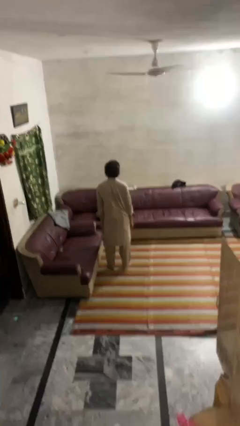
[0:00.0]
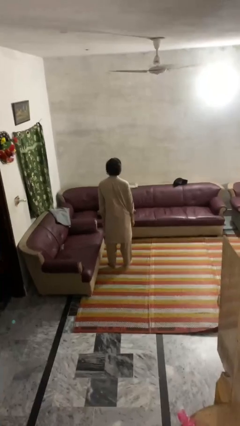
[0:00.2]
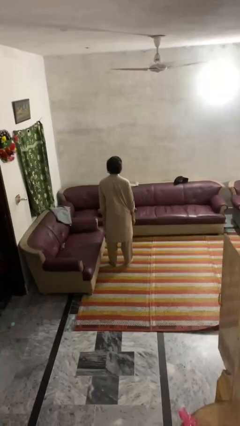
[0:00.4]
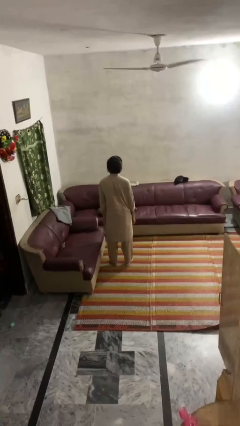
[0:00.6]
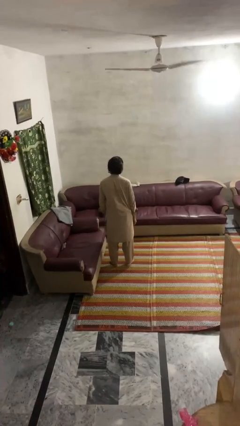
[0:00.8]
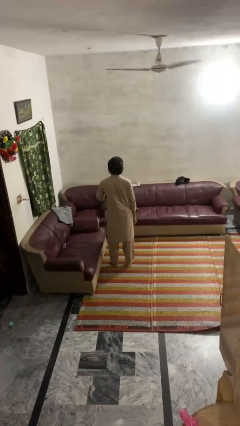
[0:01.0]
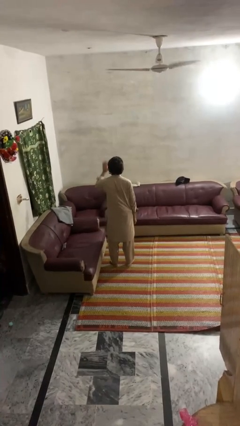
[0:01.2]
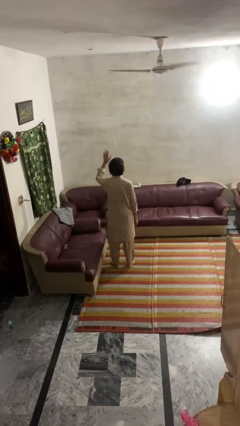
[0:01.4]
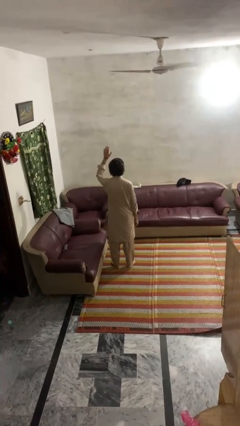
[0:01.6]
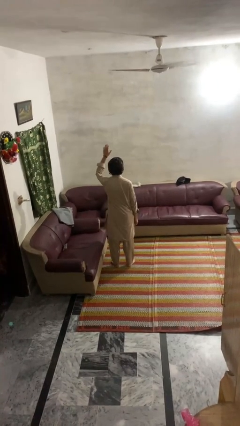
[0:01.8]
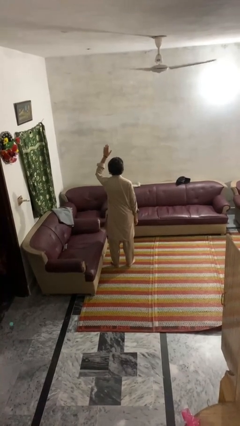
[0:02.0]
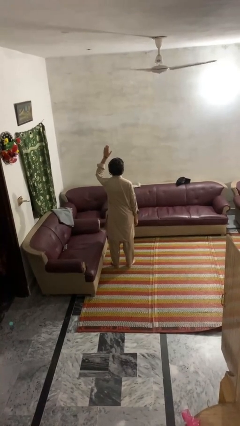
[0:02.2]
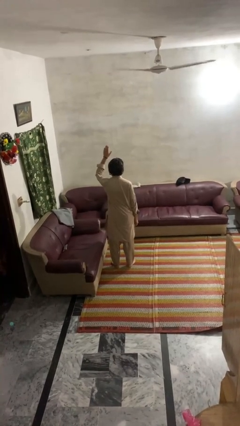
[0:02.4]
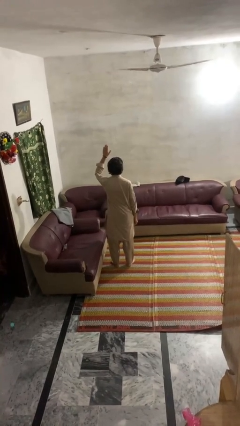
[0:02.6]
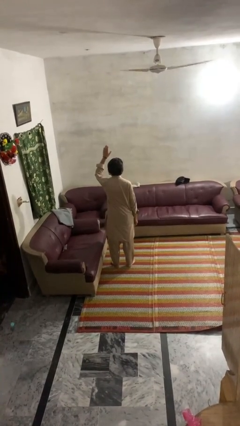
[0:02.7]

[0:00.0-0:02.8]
person gestures raise hand

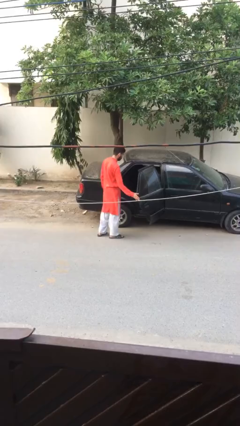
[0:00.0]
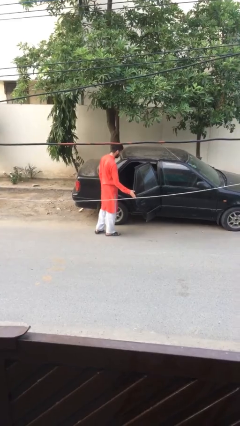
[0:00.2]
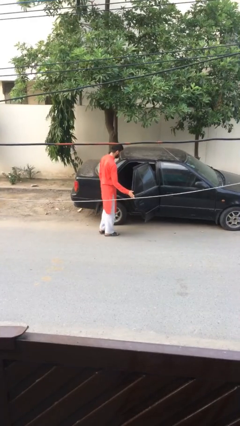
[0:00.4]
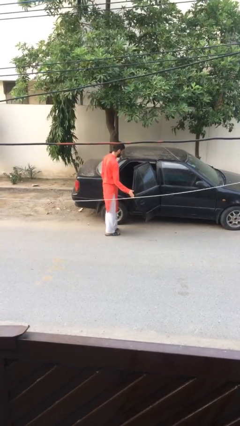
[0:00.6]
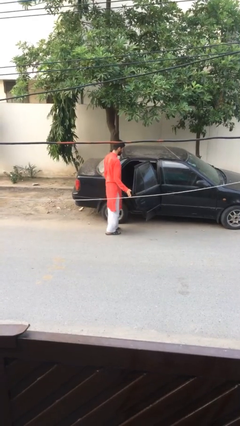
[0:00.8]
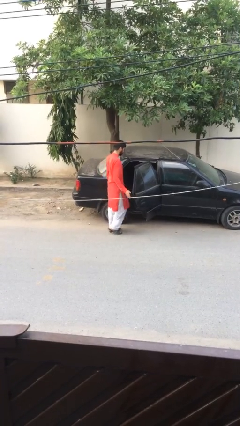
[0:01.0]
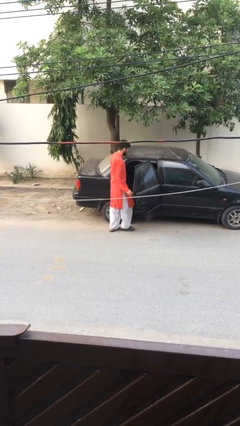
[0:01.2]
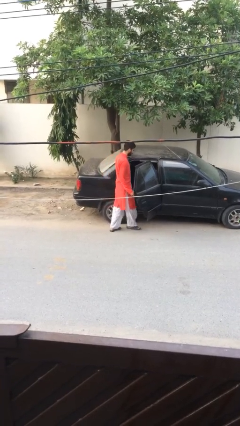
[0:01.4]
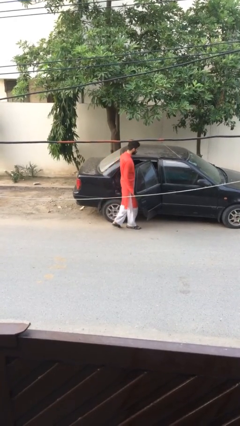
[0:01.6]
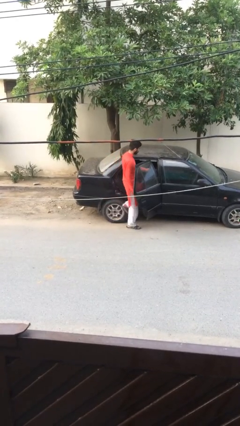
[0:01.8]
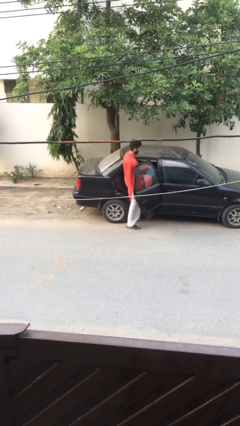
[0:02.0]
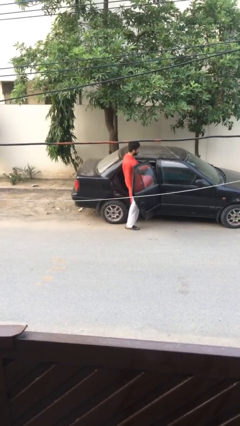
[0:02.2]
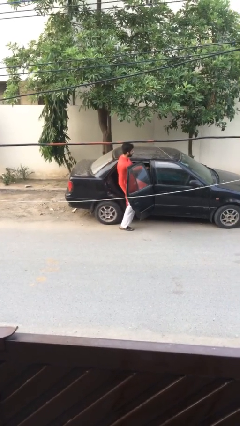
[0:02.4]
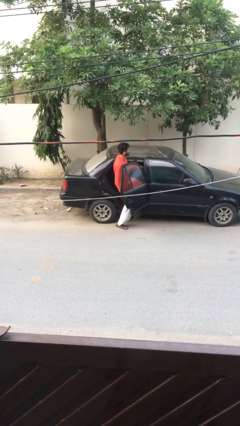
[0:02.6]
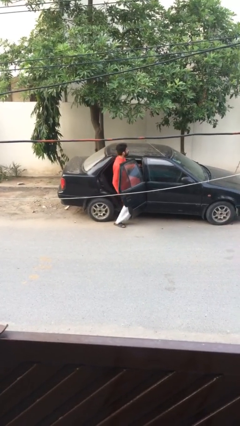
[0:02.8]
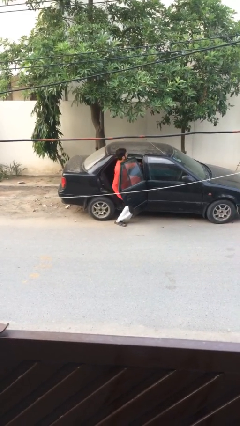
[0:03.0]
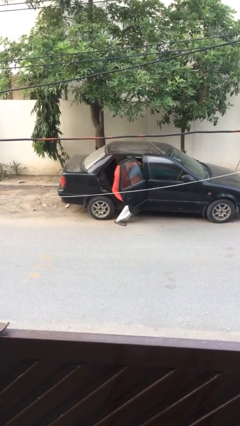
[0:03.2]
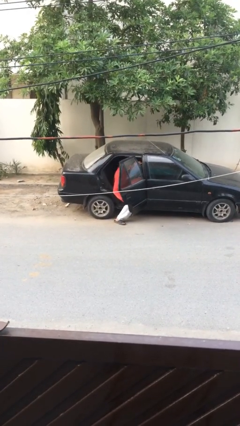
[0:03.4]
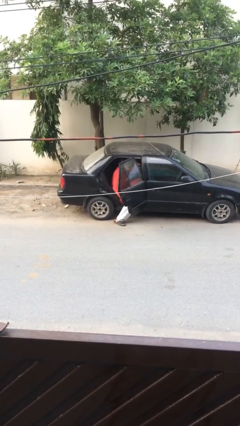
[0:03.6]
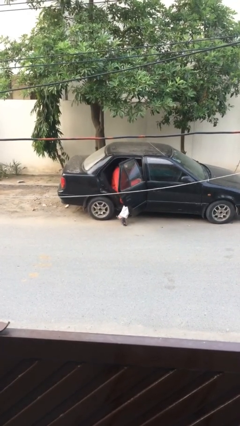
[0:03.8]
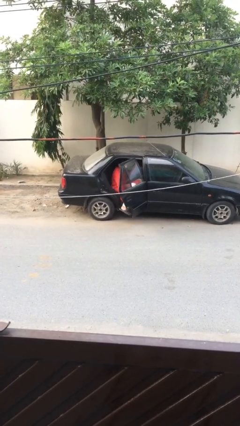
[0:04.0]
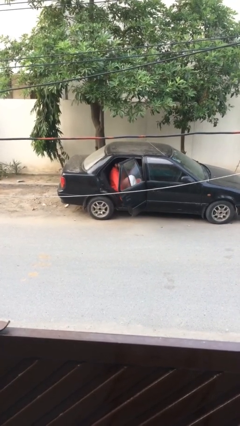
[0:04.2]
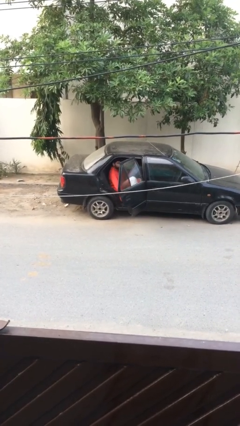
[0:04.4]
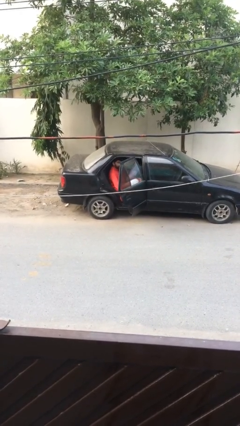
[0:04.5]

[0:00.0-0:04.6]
person enters car

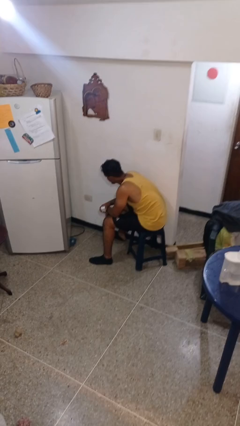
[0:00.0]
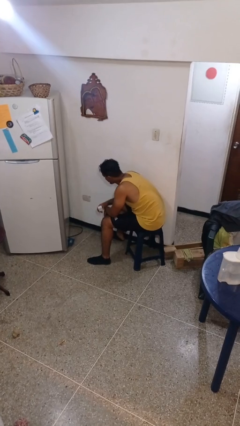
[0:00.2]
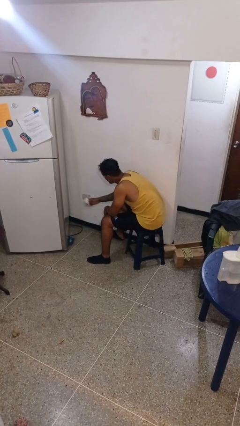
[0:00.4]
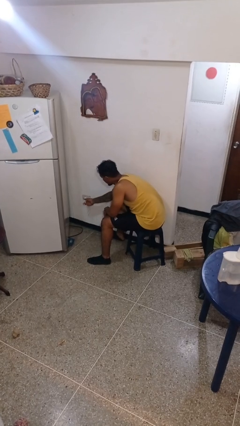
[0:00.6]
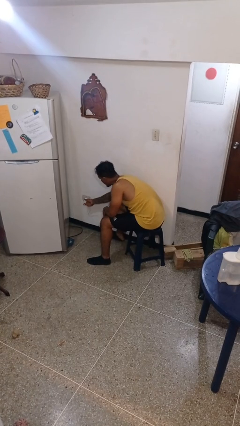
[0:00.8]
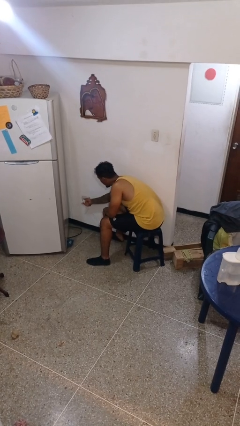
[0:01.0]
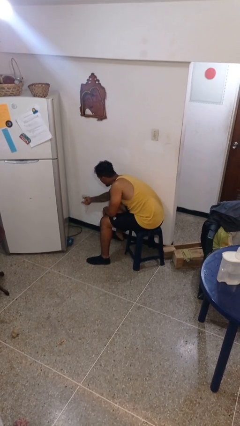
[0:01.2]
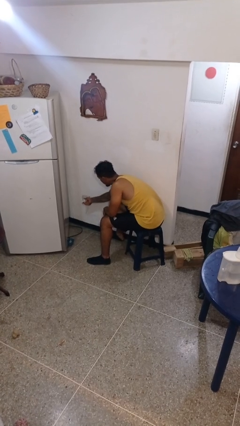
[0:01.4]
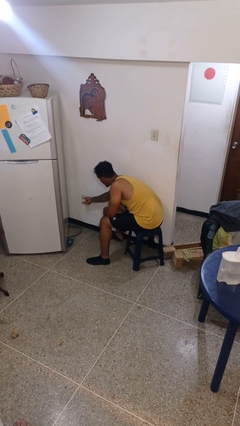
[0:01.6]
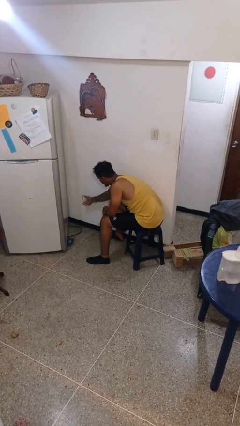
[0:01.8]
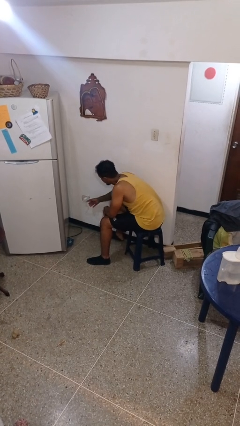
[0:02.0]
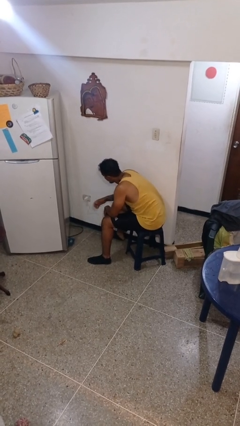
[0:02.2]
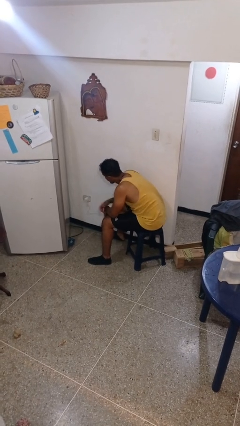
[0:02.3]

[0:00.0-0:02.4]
person plugs into electrical socket

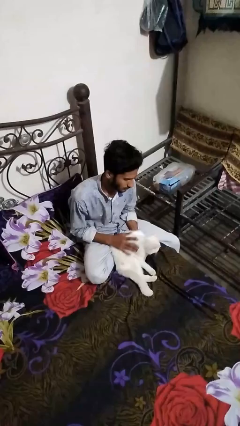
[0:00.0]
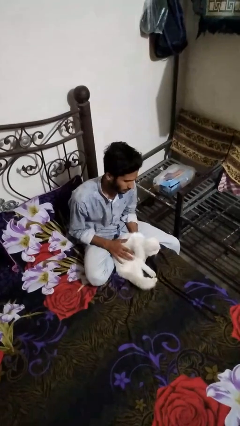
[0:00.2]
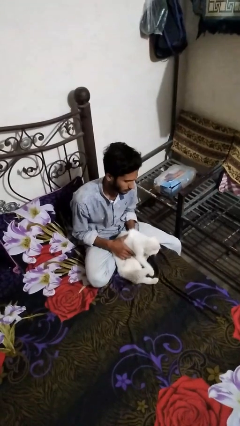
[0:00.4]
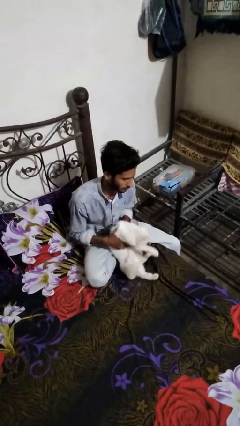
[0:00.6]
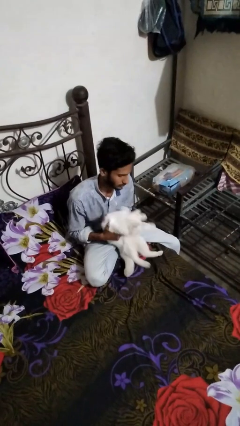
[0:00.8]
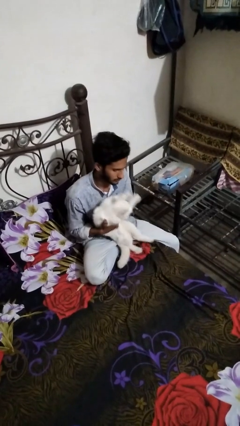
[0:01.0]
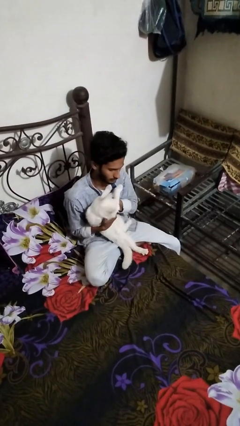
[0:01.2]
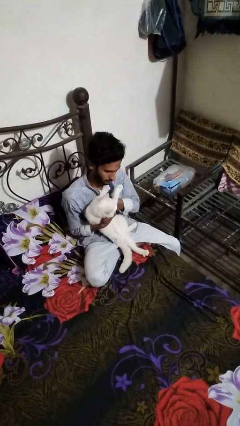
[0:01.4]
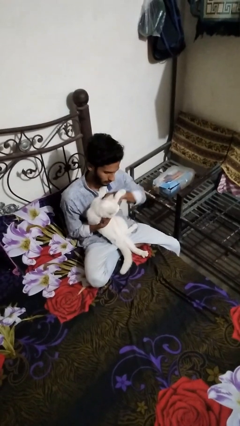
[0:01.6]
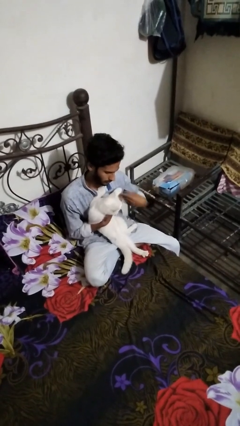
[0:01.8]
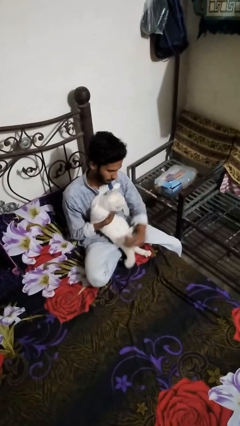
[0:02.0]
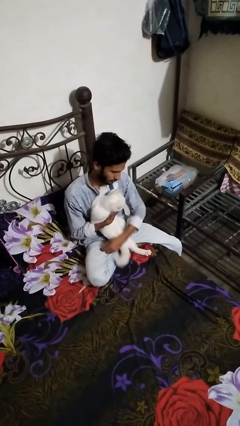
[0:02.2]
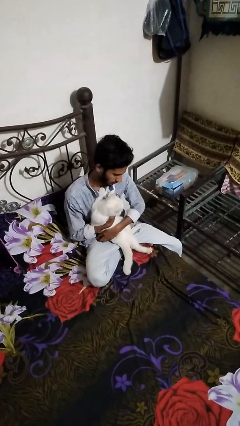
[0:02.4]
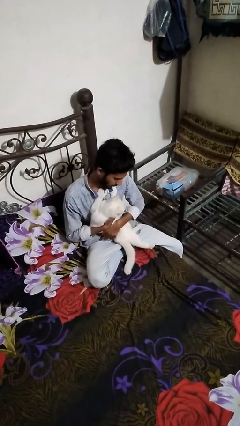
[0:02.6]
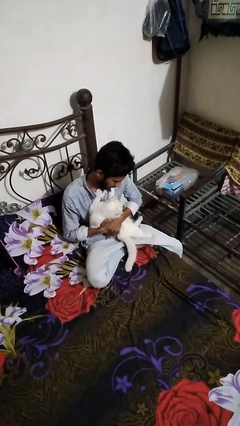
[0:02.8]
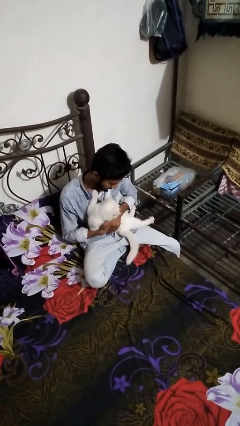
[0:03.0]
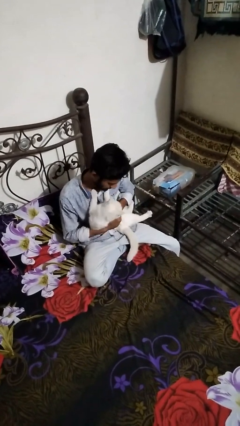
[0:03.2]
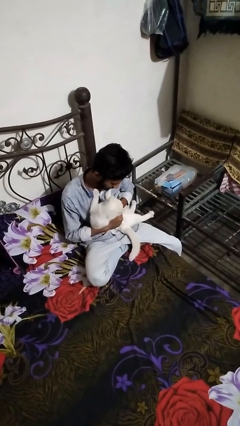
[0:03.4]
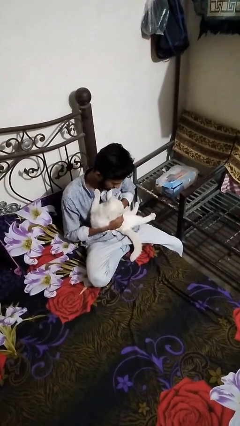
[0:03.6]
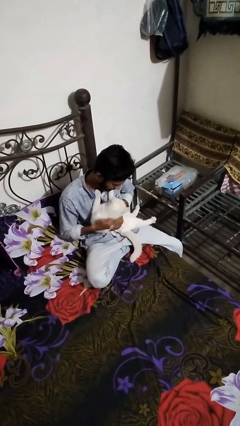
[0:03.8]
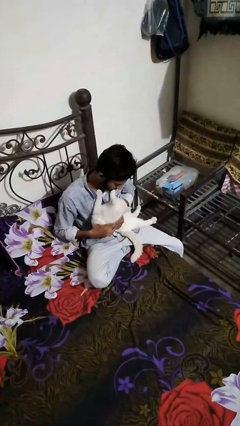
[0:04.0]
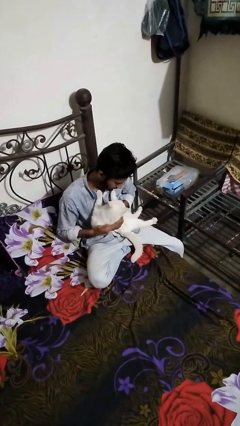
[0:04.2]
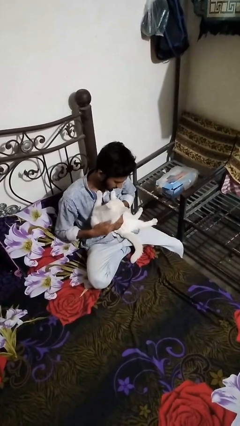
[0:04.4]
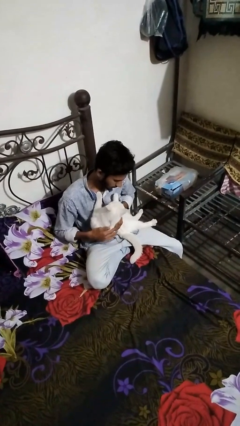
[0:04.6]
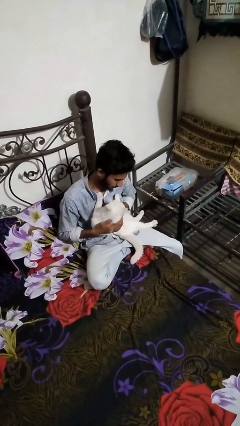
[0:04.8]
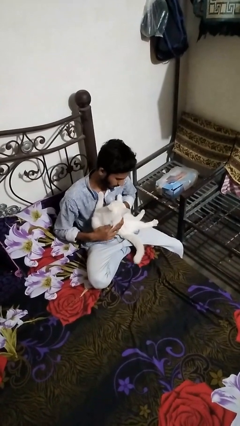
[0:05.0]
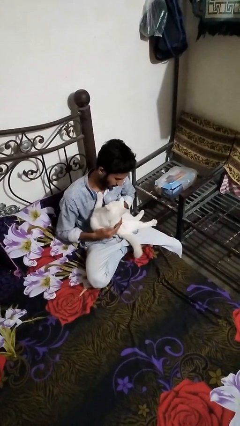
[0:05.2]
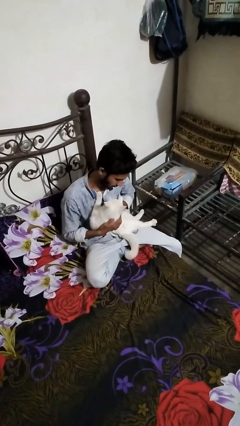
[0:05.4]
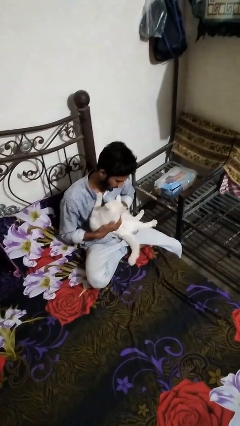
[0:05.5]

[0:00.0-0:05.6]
person hugs cat

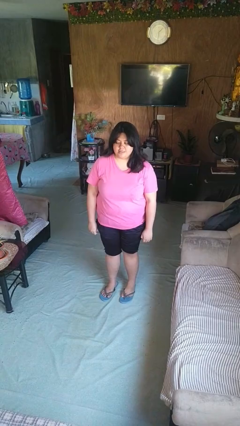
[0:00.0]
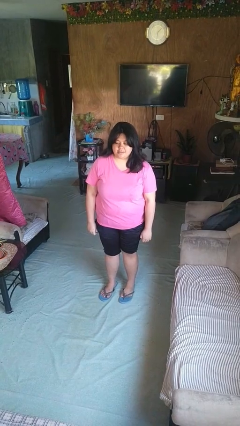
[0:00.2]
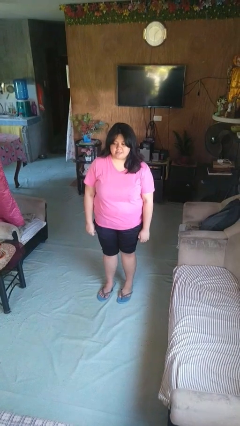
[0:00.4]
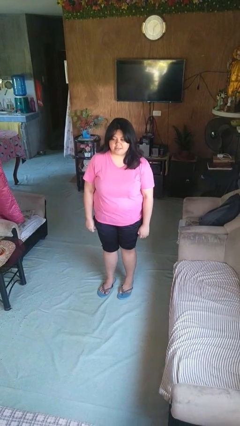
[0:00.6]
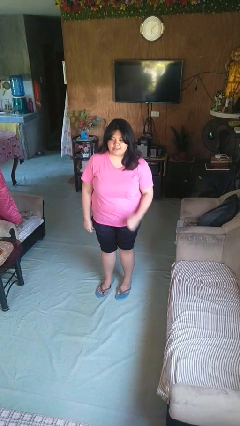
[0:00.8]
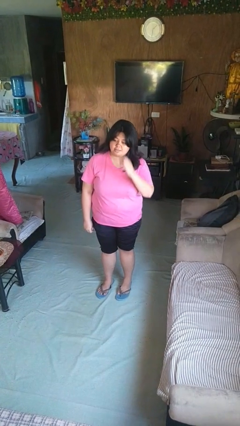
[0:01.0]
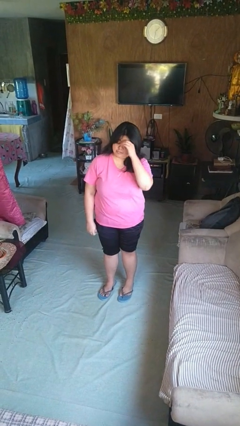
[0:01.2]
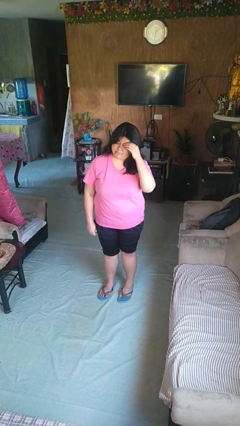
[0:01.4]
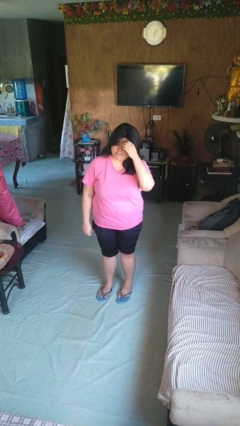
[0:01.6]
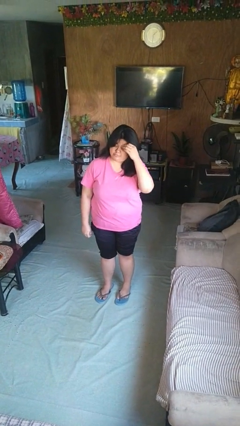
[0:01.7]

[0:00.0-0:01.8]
person scratches face

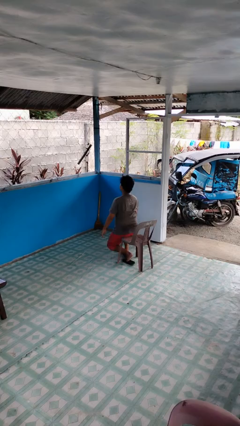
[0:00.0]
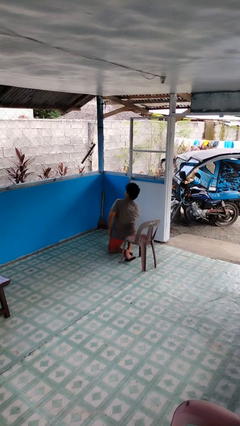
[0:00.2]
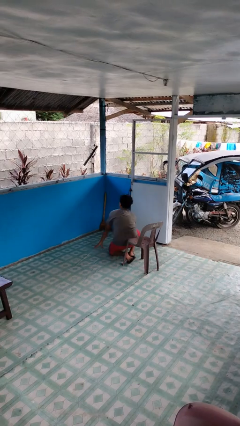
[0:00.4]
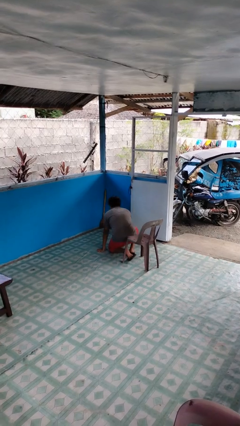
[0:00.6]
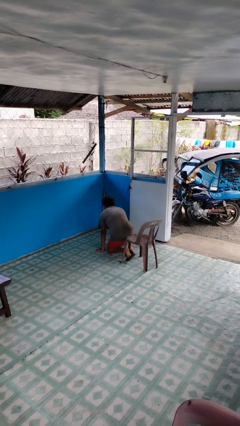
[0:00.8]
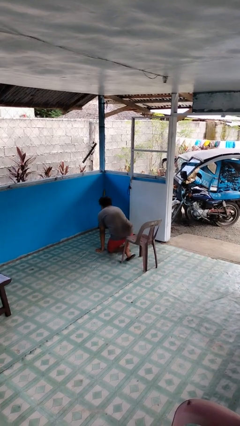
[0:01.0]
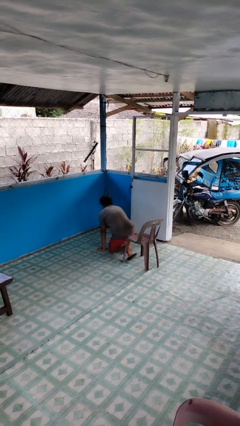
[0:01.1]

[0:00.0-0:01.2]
person falls from chair
